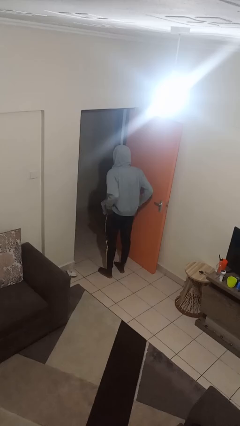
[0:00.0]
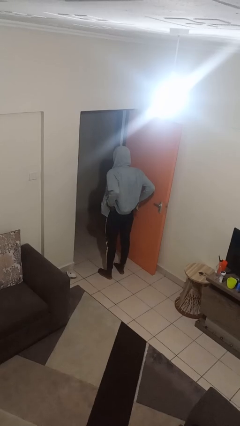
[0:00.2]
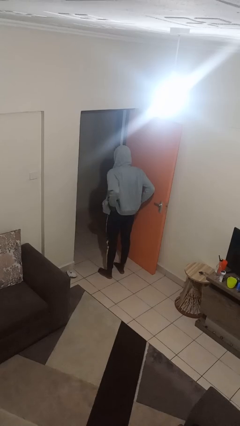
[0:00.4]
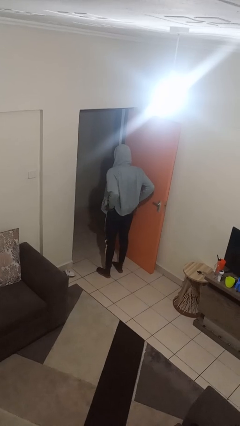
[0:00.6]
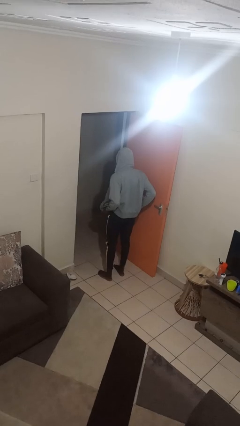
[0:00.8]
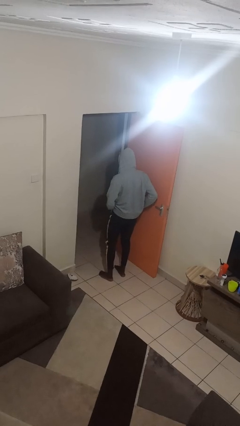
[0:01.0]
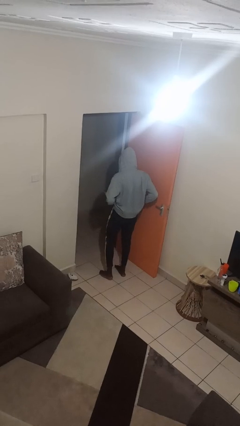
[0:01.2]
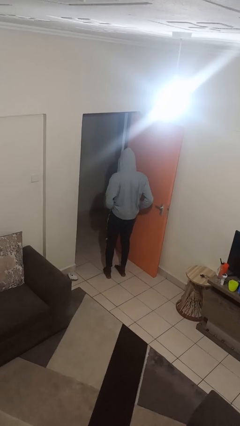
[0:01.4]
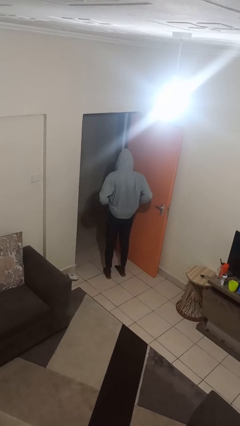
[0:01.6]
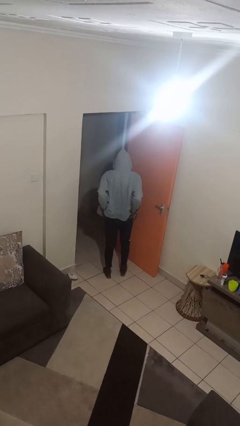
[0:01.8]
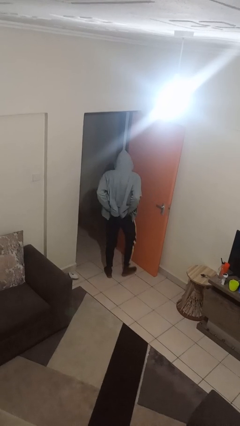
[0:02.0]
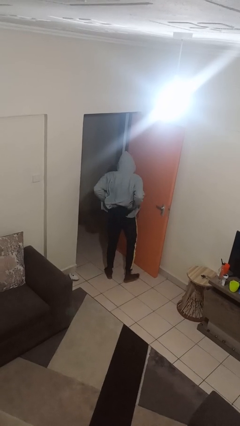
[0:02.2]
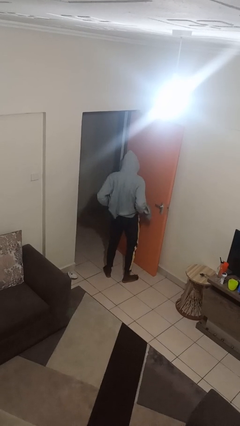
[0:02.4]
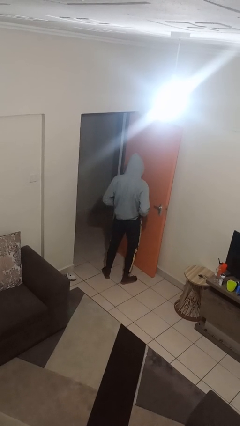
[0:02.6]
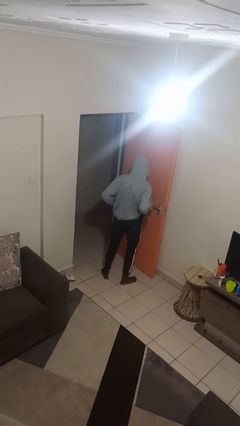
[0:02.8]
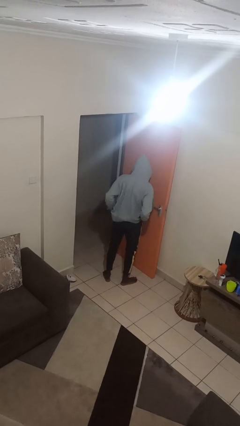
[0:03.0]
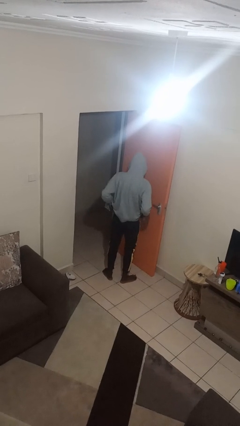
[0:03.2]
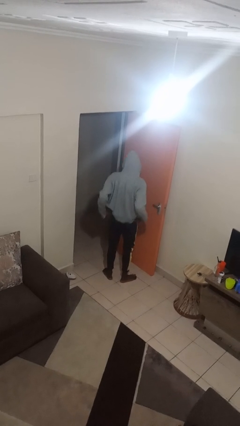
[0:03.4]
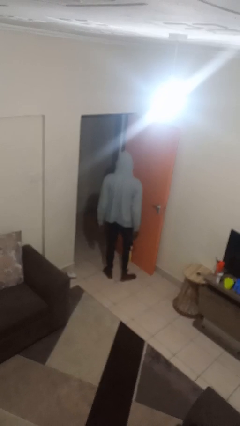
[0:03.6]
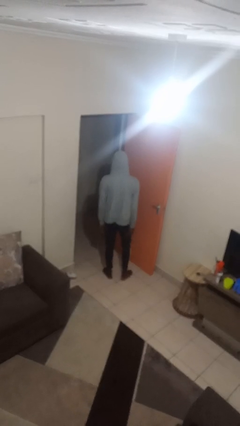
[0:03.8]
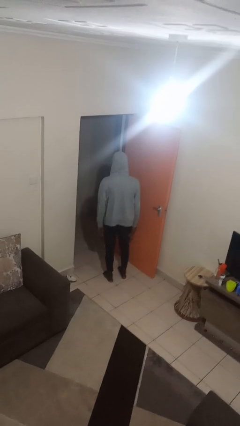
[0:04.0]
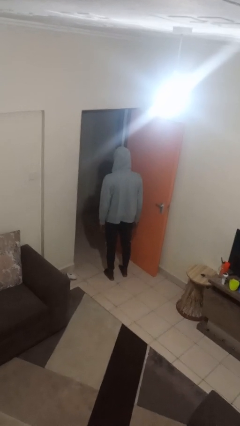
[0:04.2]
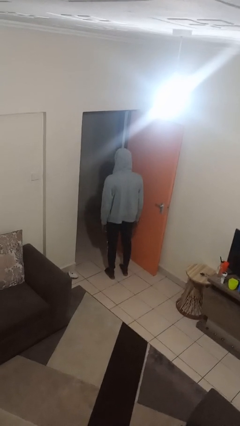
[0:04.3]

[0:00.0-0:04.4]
person hikes up pants

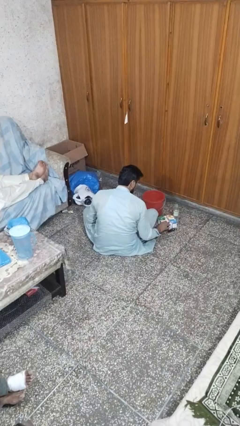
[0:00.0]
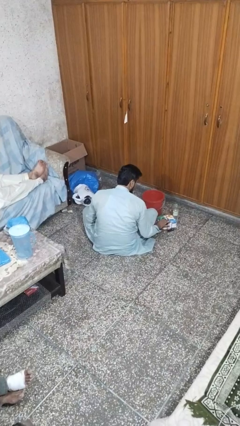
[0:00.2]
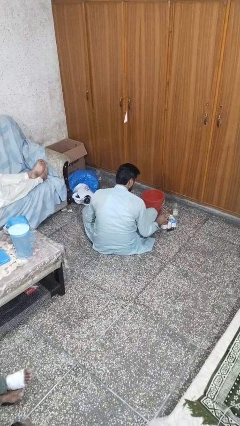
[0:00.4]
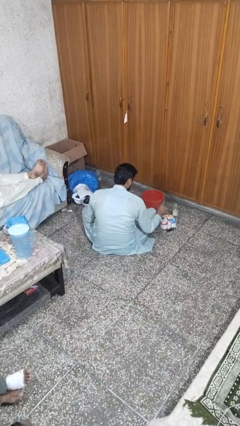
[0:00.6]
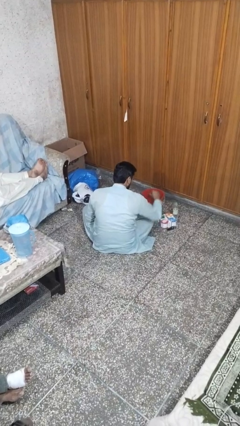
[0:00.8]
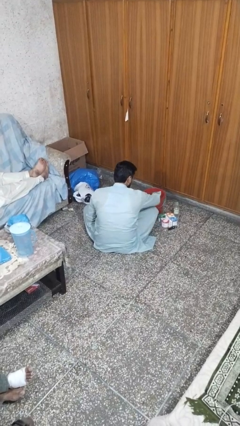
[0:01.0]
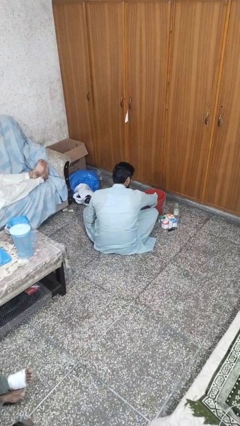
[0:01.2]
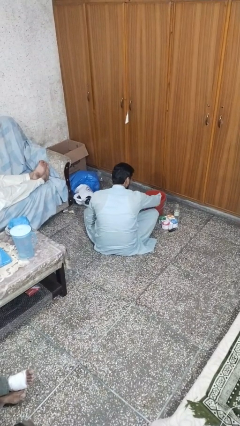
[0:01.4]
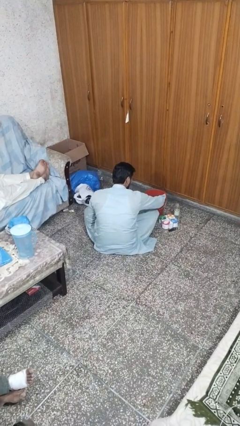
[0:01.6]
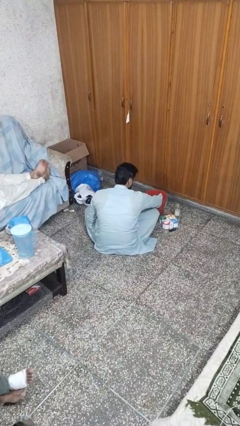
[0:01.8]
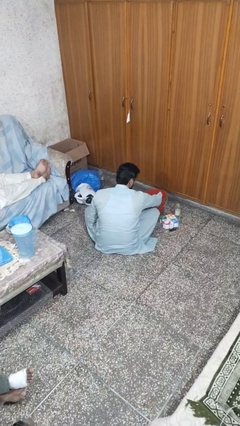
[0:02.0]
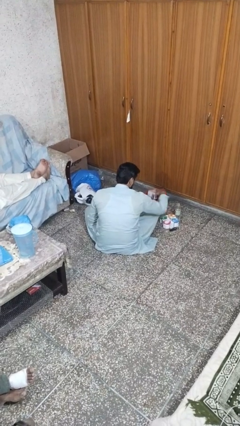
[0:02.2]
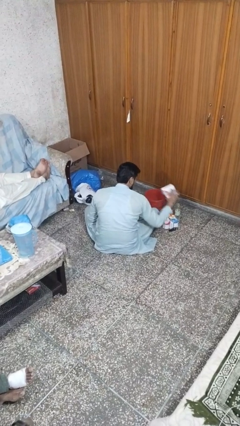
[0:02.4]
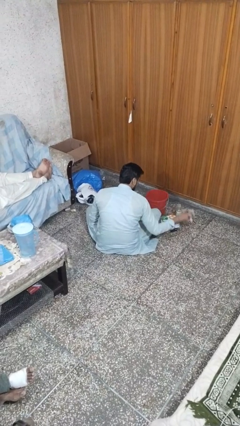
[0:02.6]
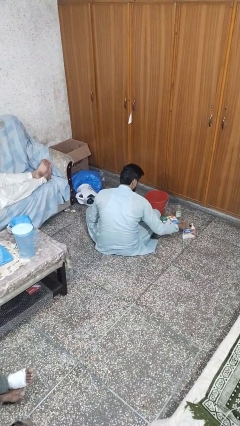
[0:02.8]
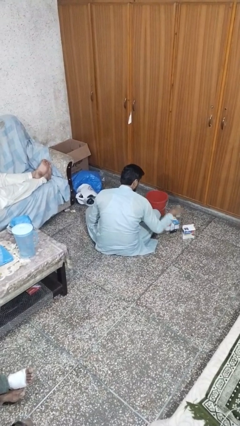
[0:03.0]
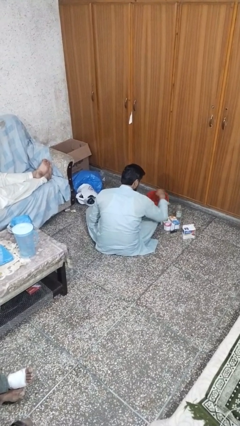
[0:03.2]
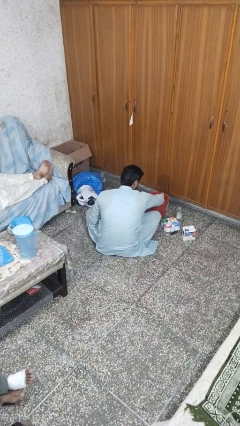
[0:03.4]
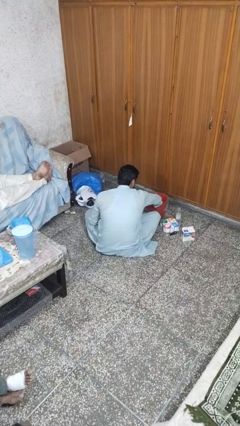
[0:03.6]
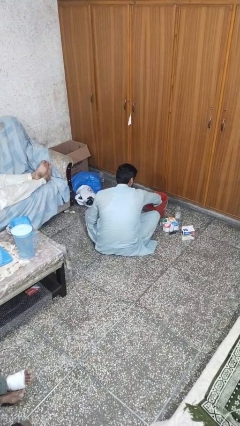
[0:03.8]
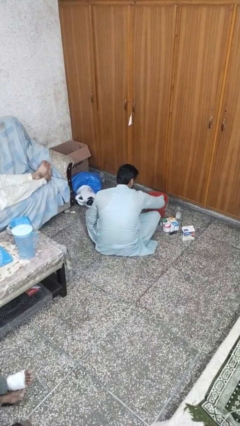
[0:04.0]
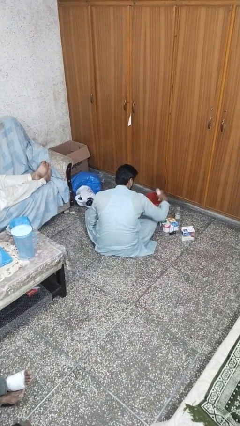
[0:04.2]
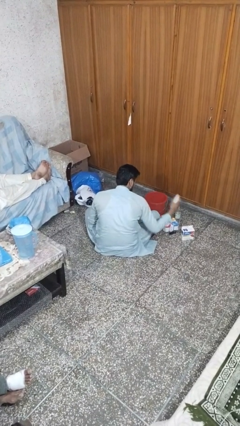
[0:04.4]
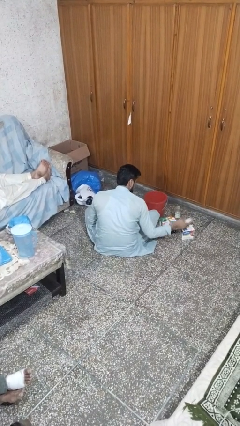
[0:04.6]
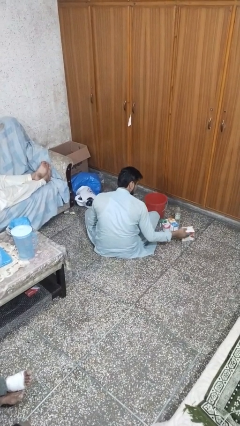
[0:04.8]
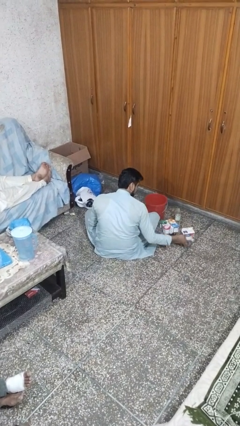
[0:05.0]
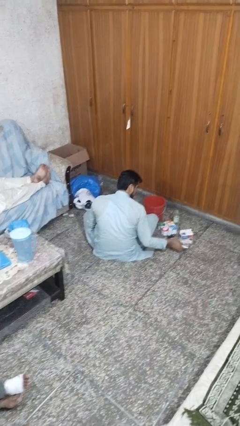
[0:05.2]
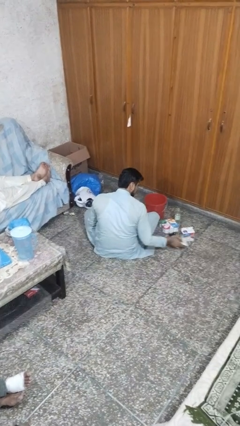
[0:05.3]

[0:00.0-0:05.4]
person takes object from basket

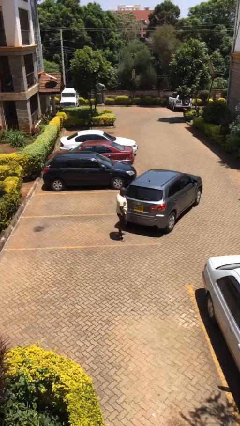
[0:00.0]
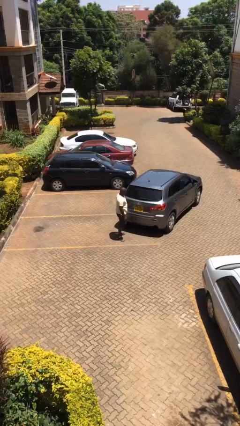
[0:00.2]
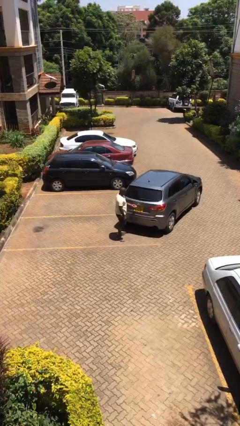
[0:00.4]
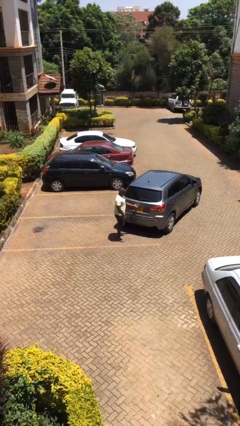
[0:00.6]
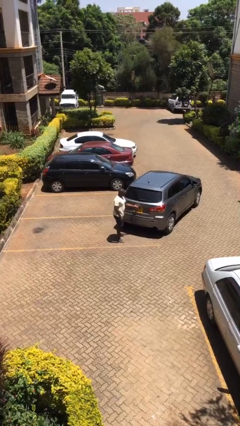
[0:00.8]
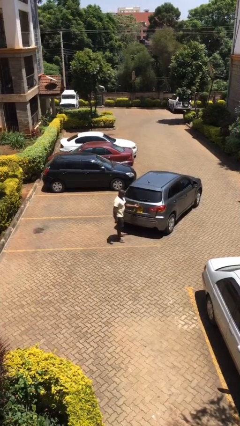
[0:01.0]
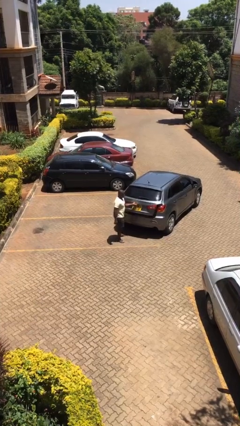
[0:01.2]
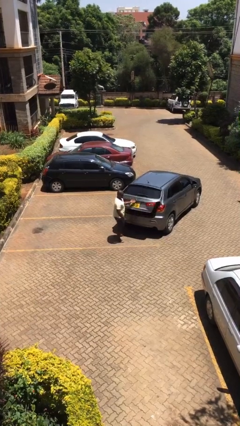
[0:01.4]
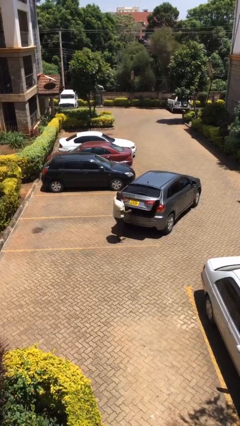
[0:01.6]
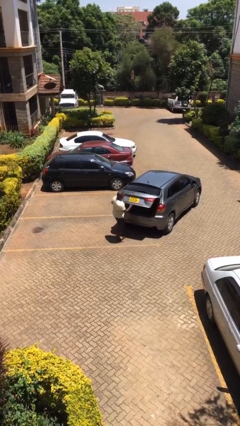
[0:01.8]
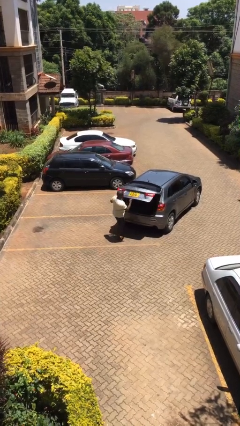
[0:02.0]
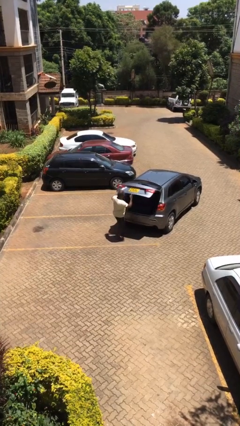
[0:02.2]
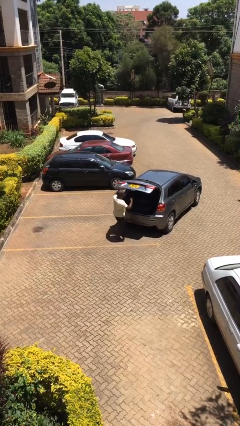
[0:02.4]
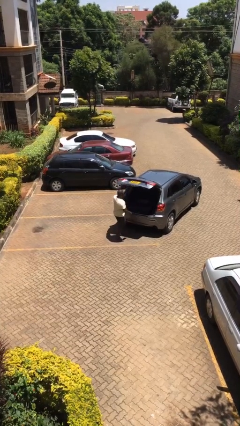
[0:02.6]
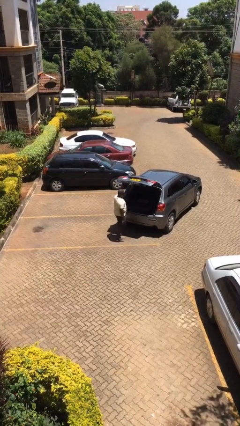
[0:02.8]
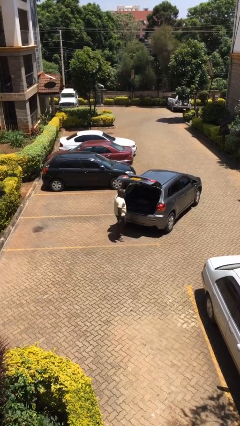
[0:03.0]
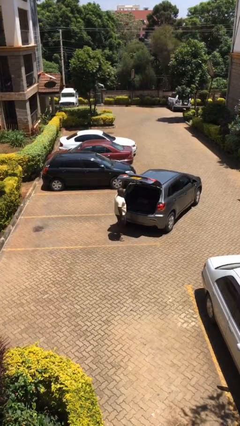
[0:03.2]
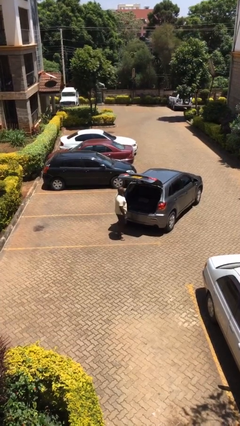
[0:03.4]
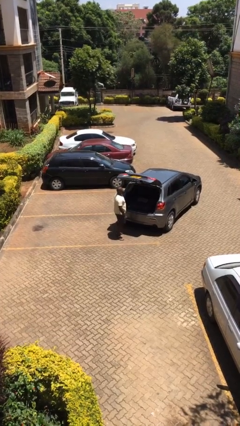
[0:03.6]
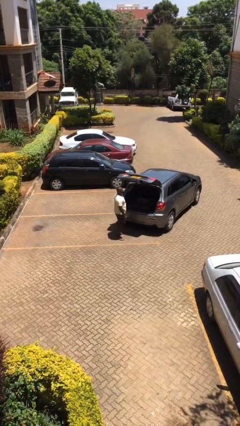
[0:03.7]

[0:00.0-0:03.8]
person opens car trunk

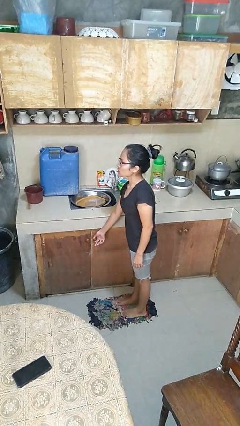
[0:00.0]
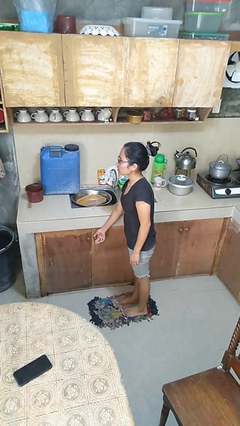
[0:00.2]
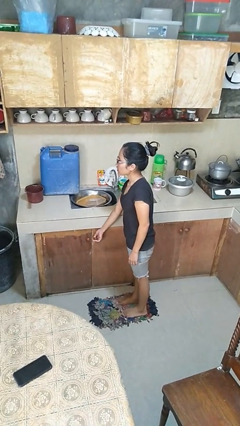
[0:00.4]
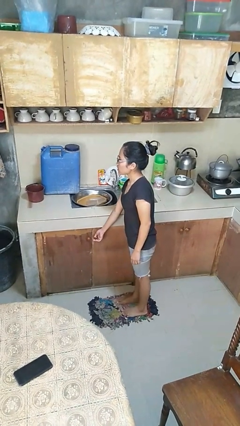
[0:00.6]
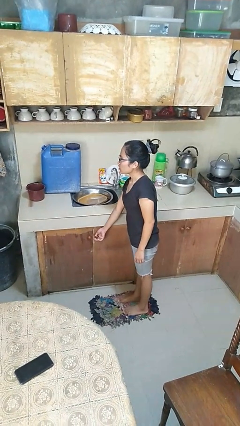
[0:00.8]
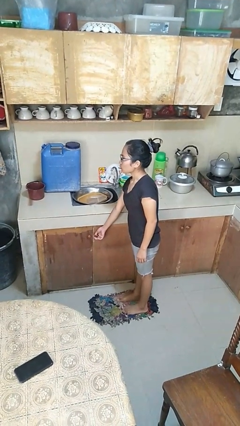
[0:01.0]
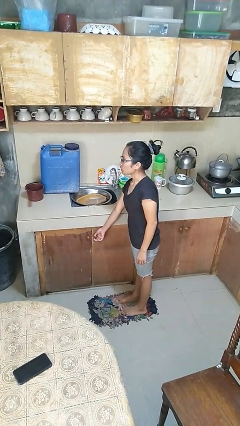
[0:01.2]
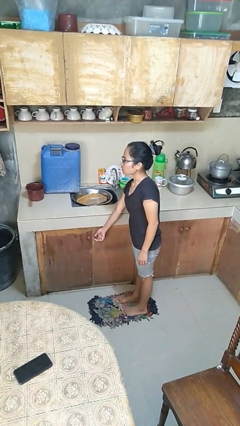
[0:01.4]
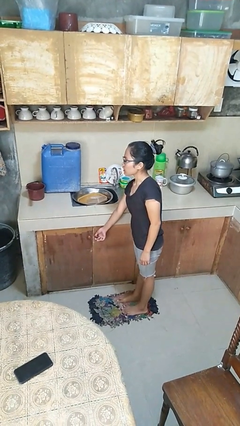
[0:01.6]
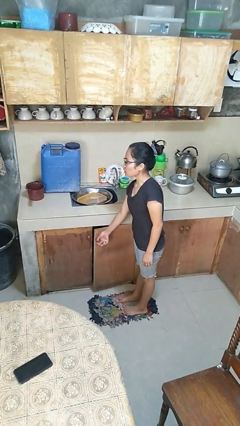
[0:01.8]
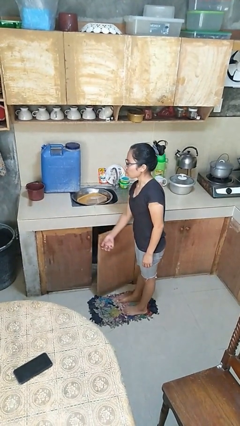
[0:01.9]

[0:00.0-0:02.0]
person closes cabinet

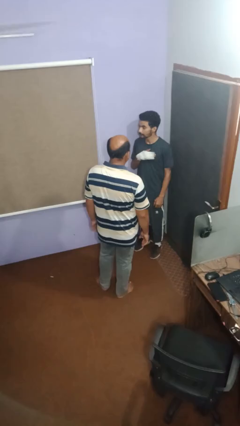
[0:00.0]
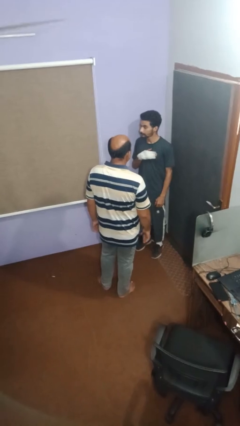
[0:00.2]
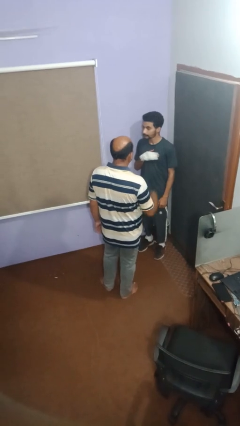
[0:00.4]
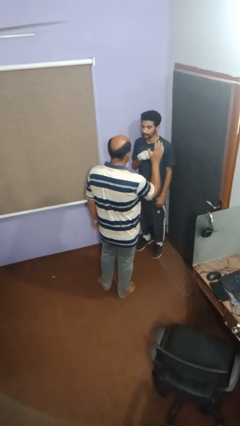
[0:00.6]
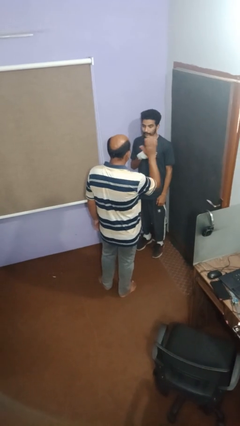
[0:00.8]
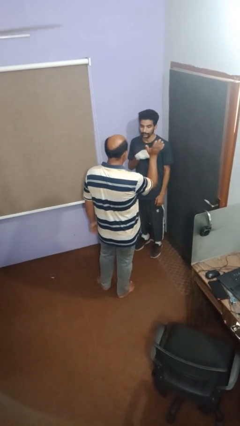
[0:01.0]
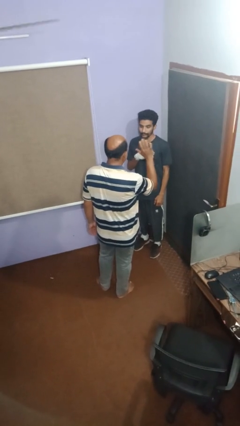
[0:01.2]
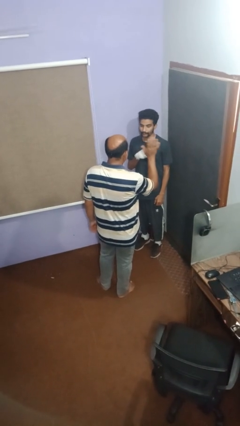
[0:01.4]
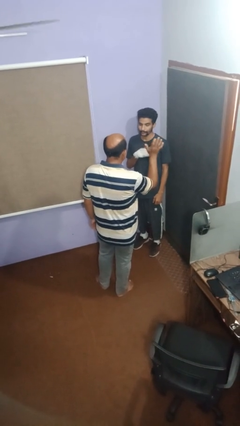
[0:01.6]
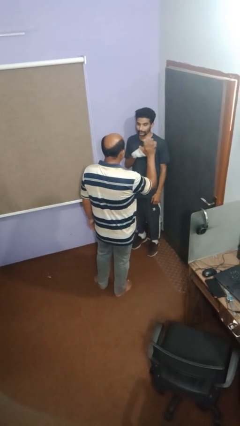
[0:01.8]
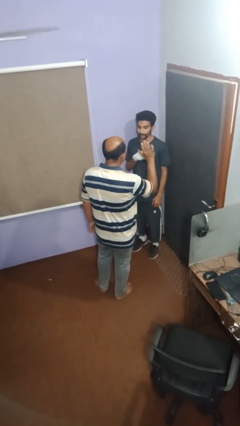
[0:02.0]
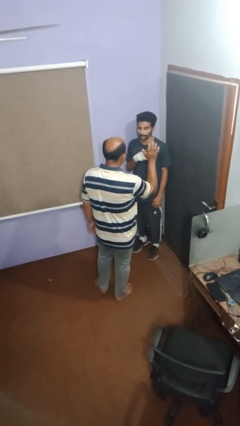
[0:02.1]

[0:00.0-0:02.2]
person waves at person
